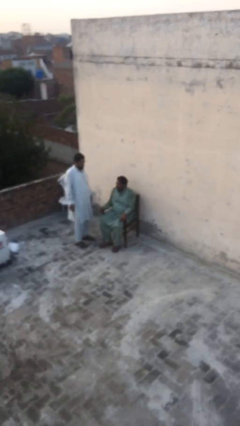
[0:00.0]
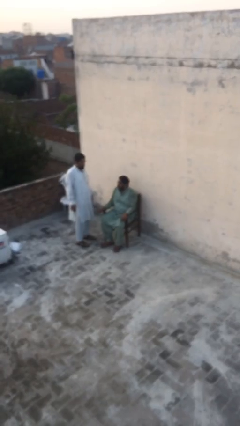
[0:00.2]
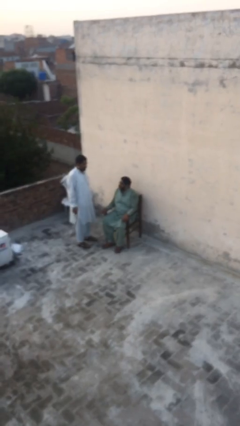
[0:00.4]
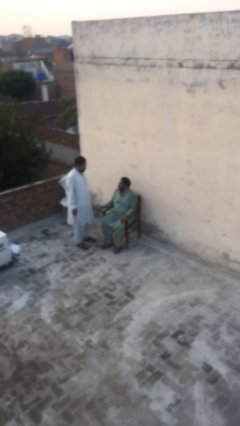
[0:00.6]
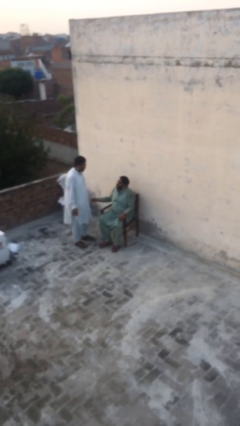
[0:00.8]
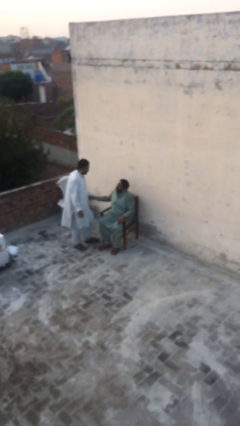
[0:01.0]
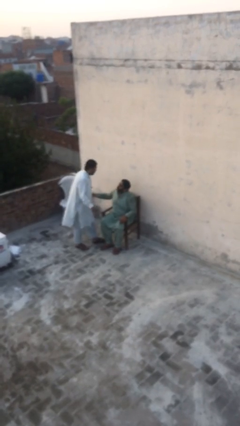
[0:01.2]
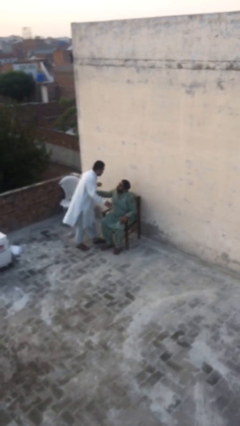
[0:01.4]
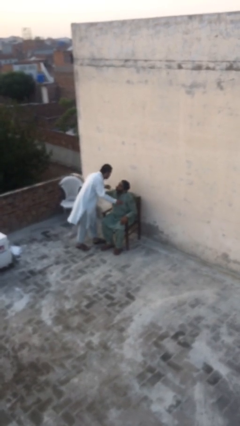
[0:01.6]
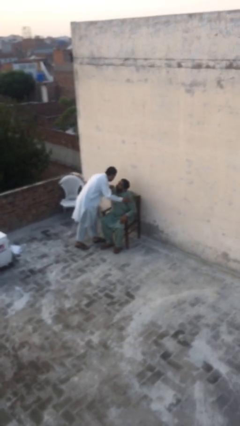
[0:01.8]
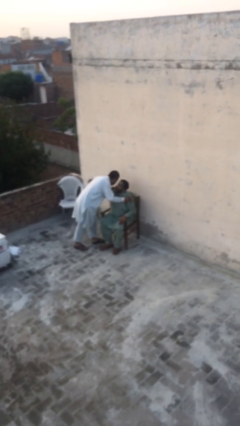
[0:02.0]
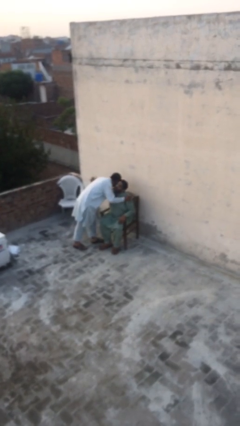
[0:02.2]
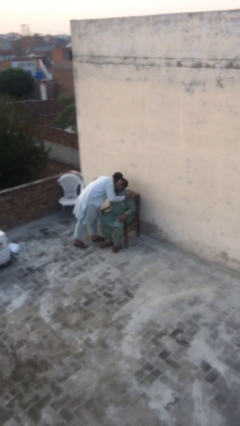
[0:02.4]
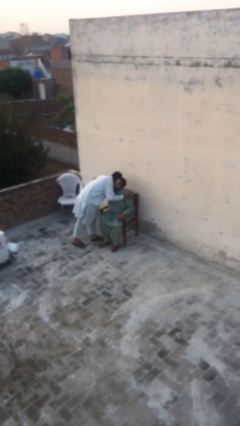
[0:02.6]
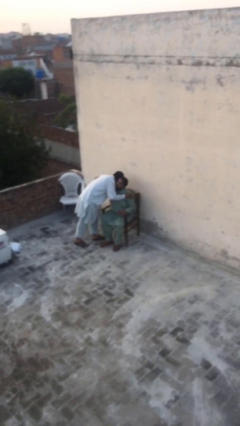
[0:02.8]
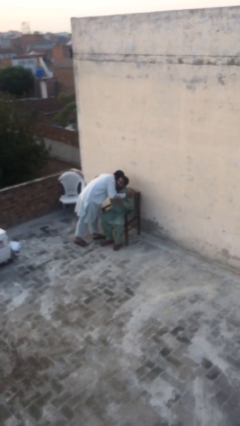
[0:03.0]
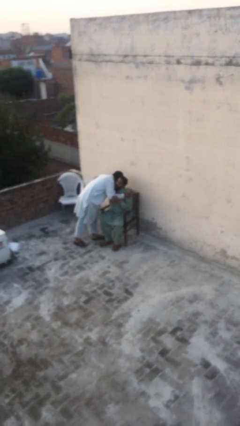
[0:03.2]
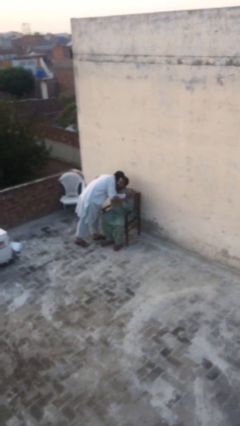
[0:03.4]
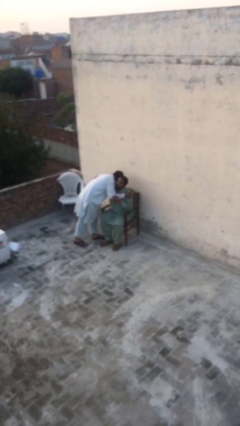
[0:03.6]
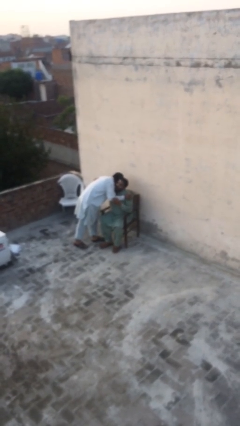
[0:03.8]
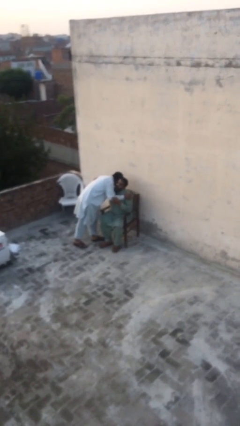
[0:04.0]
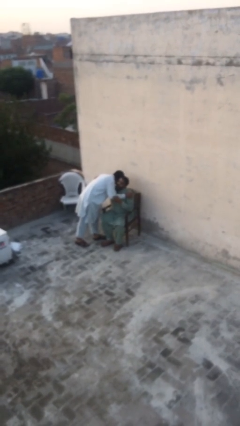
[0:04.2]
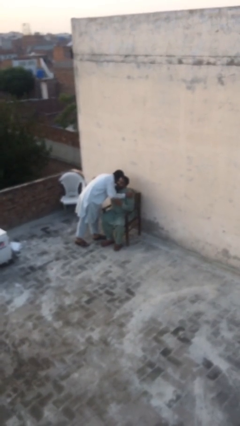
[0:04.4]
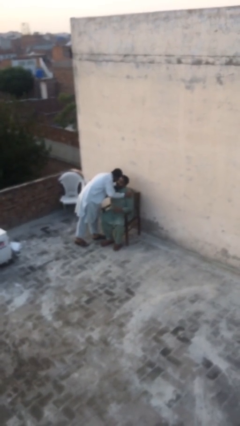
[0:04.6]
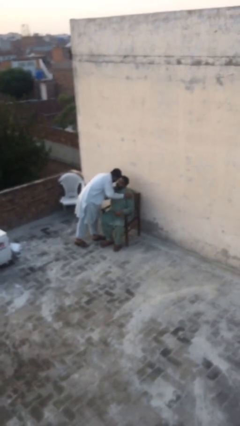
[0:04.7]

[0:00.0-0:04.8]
person embraces person

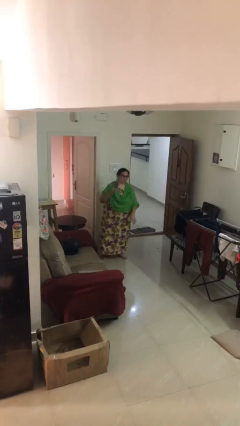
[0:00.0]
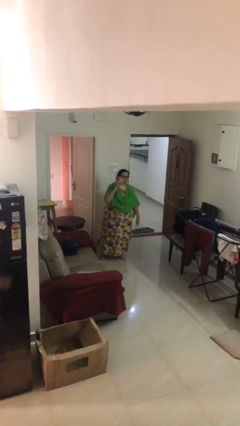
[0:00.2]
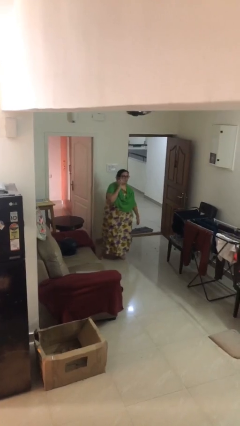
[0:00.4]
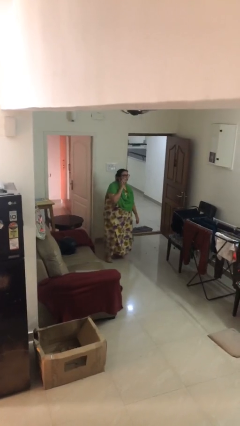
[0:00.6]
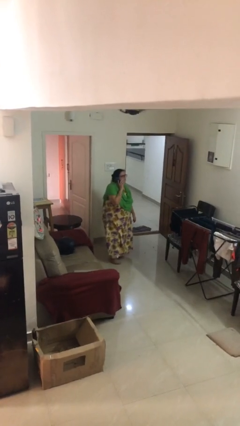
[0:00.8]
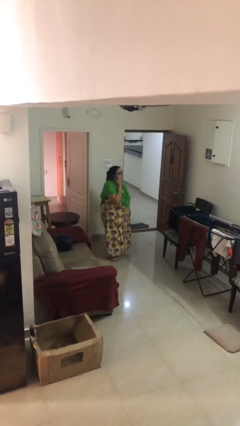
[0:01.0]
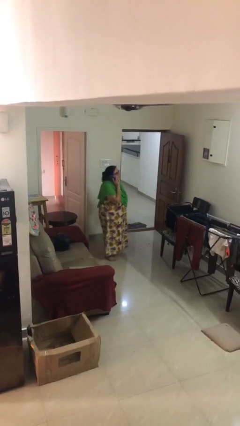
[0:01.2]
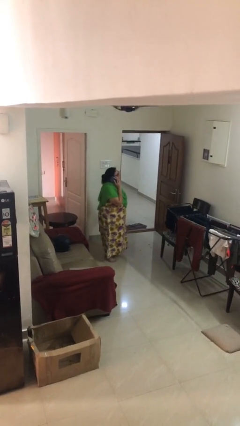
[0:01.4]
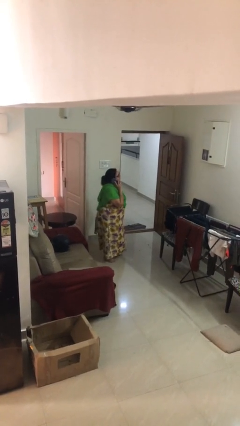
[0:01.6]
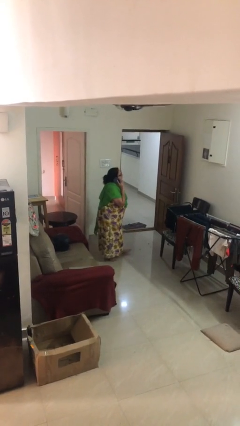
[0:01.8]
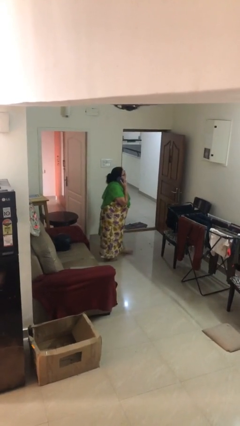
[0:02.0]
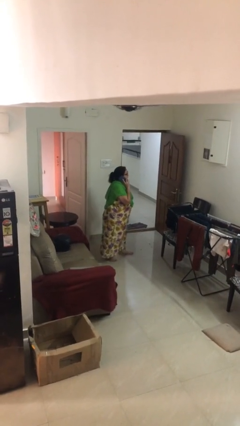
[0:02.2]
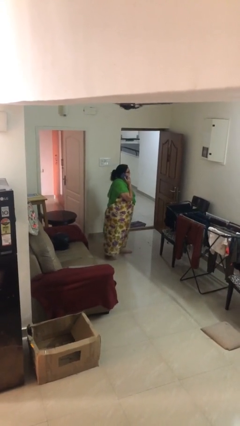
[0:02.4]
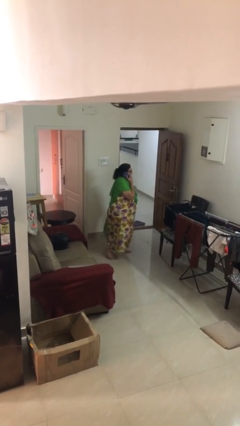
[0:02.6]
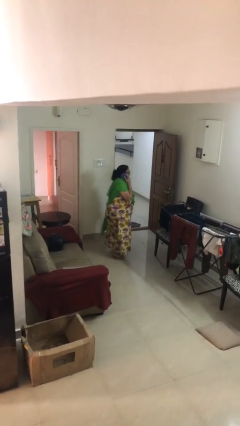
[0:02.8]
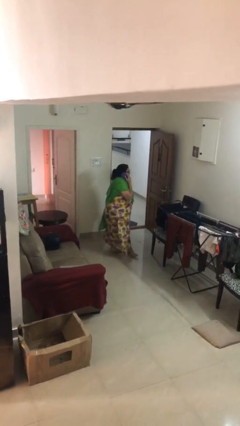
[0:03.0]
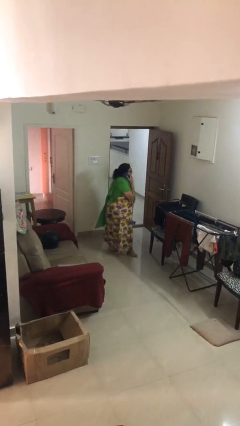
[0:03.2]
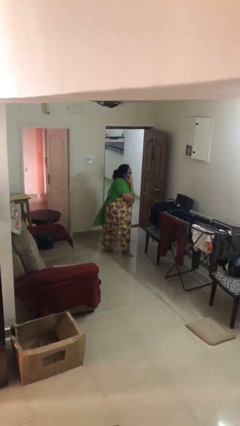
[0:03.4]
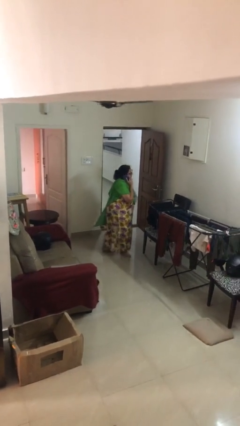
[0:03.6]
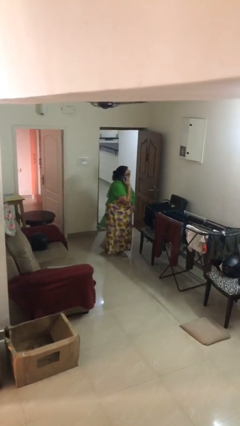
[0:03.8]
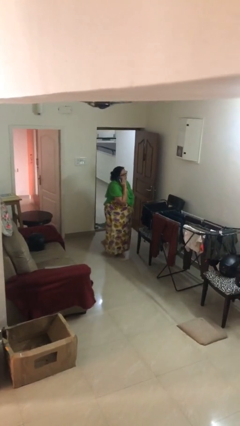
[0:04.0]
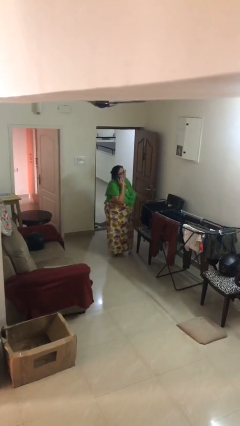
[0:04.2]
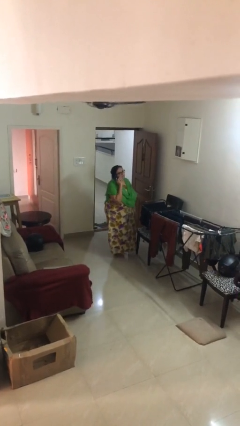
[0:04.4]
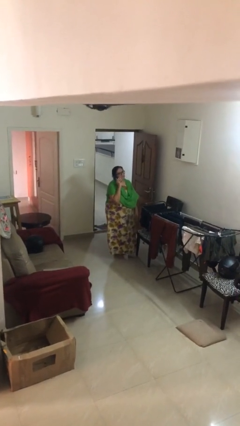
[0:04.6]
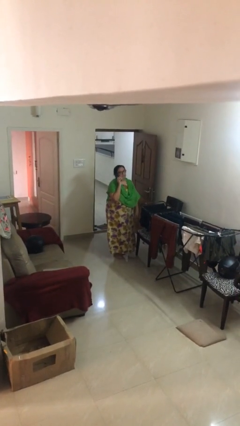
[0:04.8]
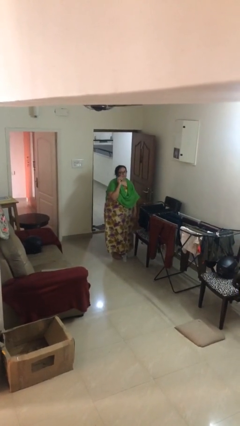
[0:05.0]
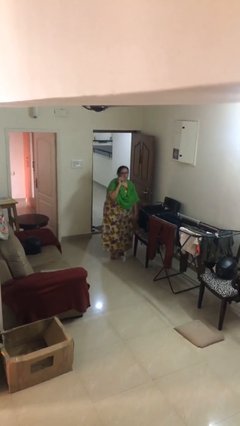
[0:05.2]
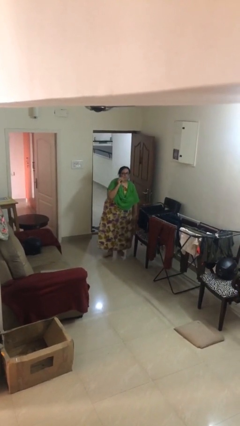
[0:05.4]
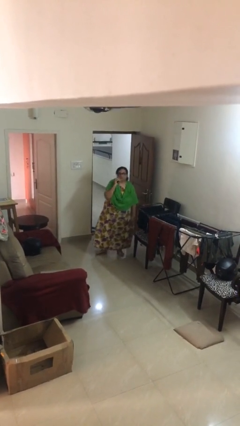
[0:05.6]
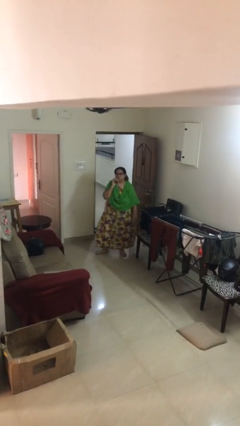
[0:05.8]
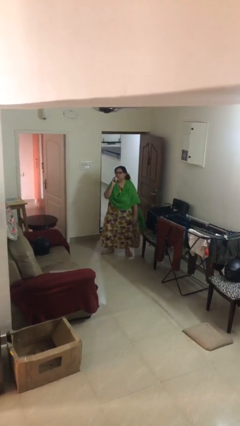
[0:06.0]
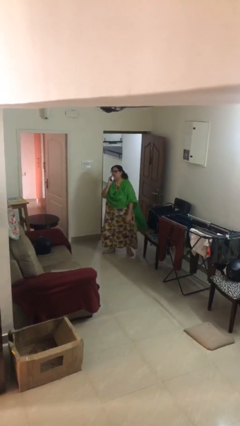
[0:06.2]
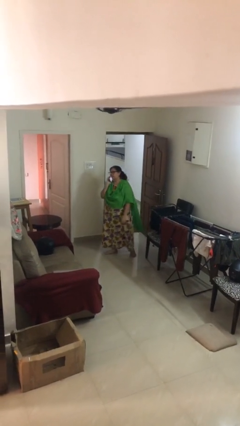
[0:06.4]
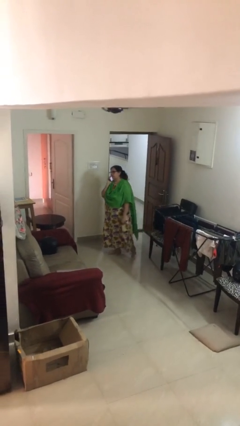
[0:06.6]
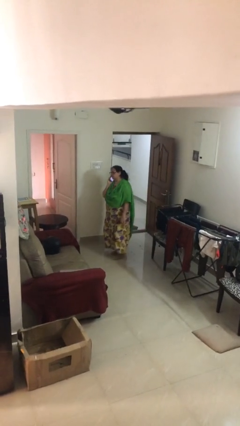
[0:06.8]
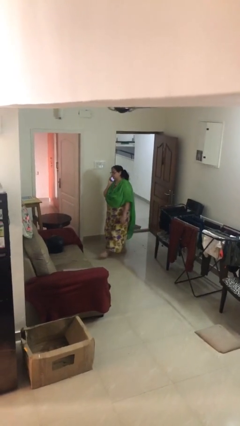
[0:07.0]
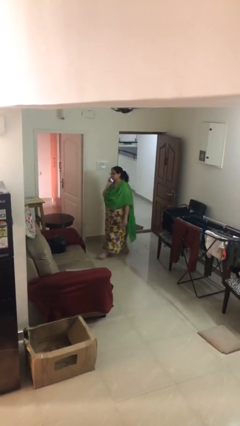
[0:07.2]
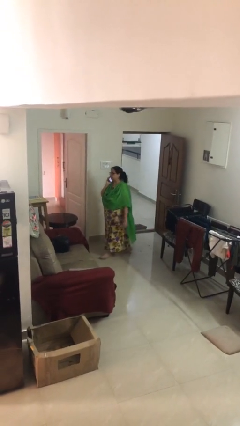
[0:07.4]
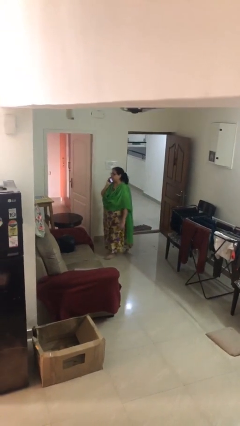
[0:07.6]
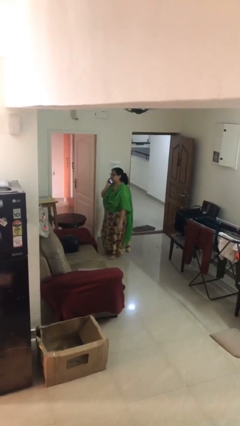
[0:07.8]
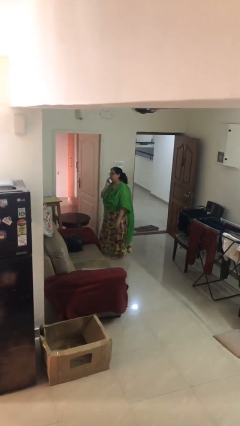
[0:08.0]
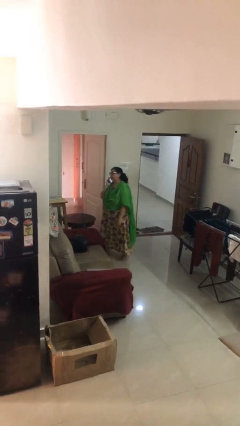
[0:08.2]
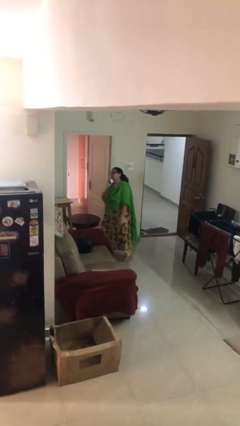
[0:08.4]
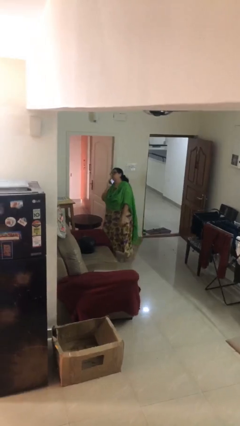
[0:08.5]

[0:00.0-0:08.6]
person talks on phone

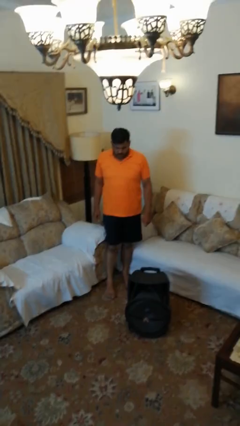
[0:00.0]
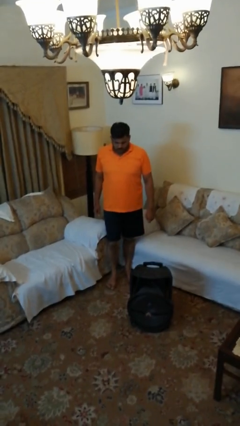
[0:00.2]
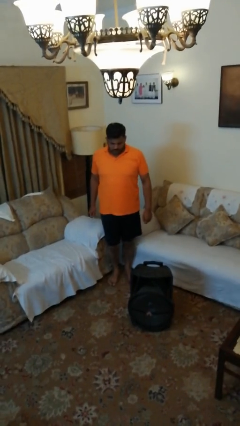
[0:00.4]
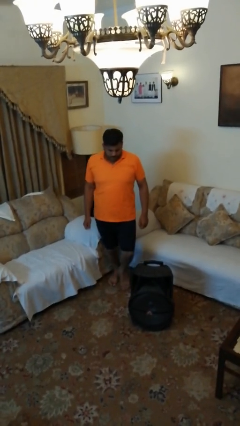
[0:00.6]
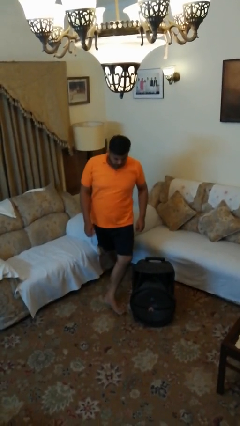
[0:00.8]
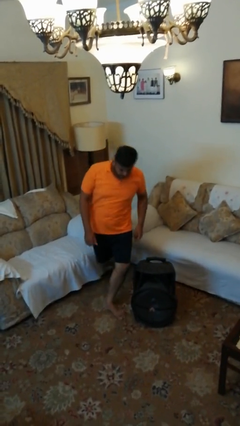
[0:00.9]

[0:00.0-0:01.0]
person trips on object on floor

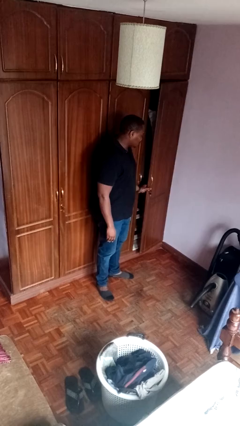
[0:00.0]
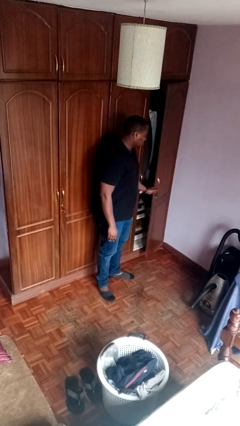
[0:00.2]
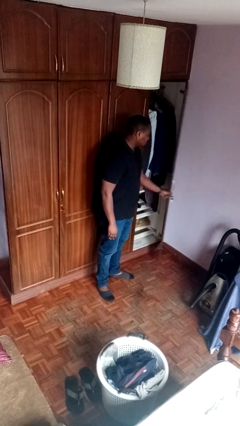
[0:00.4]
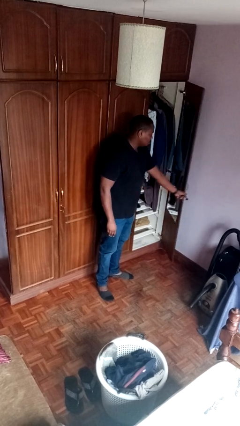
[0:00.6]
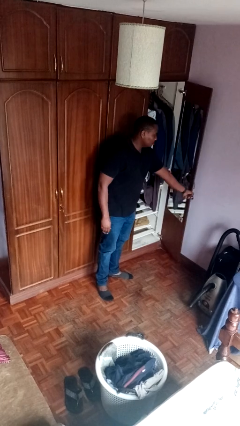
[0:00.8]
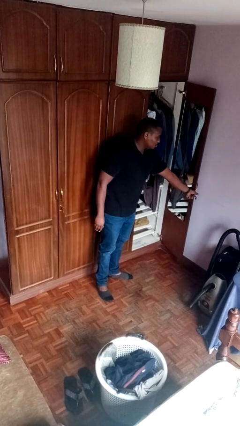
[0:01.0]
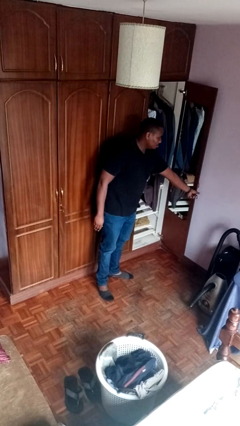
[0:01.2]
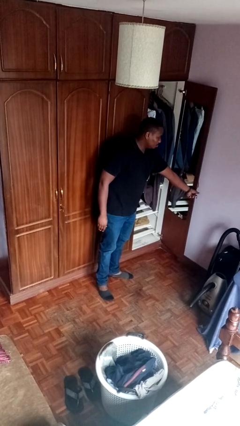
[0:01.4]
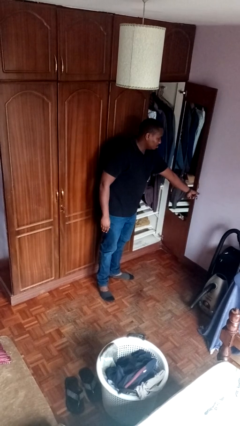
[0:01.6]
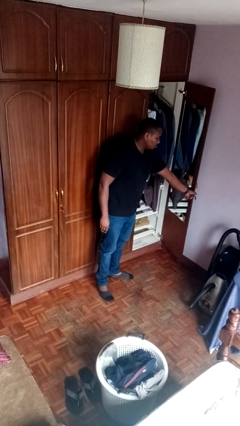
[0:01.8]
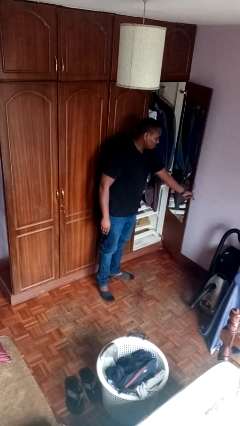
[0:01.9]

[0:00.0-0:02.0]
person opens closet door

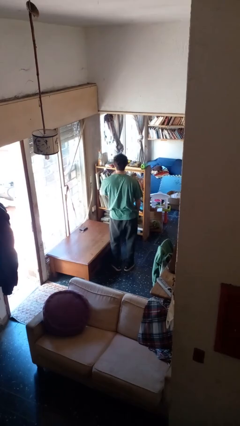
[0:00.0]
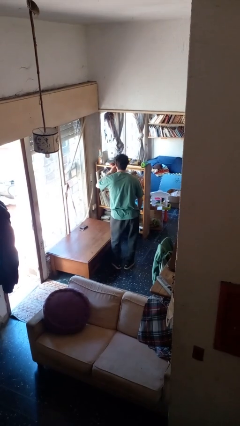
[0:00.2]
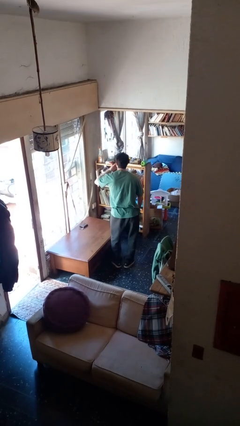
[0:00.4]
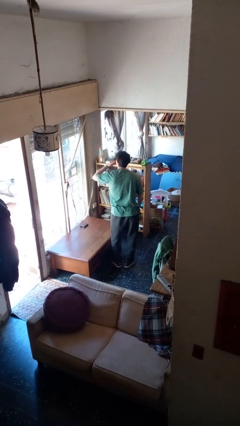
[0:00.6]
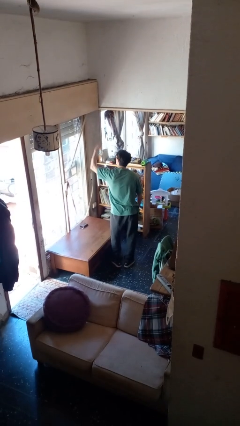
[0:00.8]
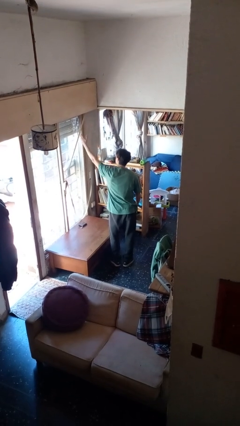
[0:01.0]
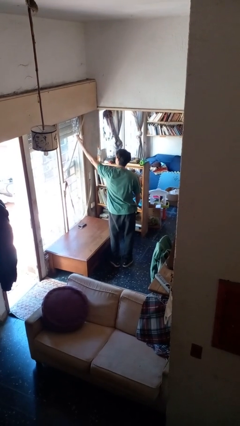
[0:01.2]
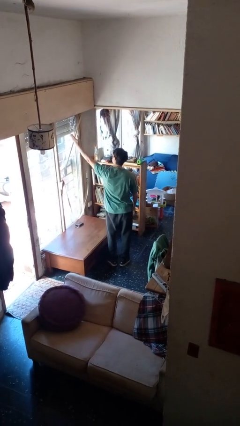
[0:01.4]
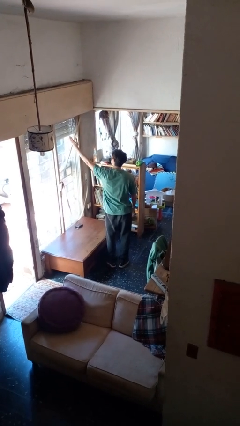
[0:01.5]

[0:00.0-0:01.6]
person gestures blow kiss
